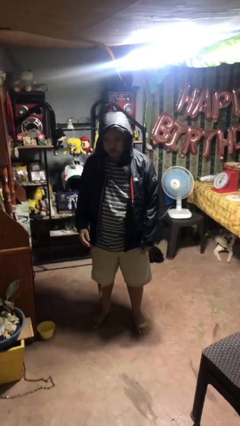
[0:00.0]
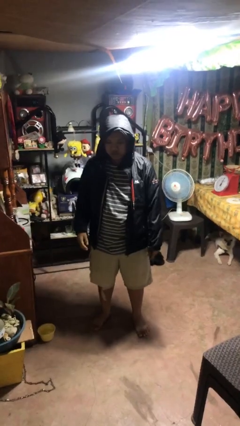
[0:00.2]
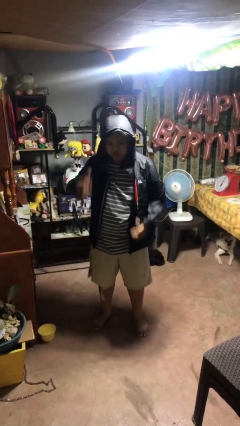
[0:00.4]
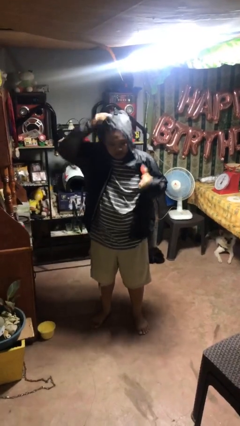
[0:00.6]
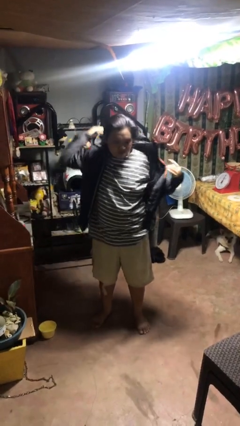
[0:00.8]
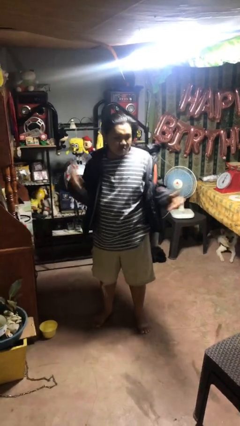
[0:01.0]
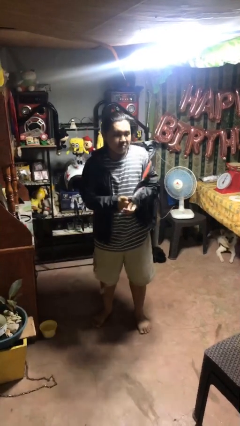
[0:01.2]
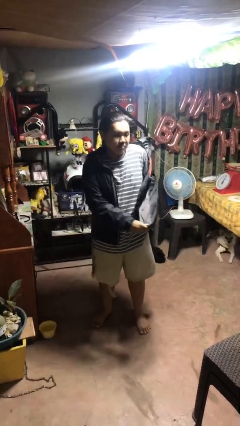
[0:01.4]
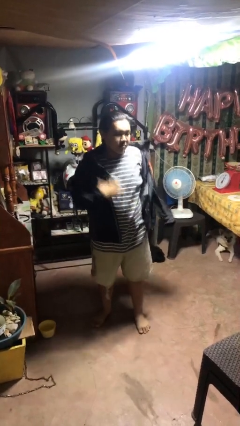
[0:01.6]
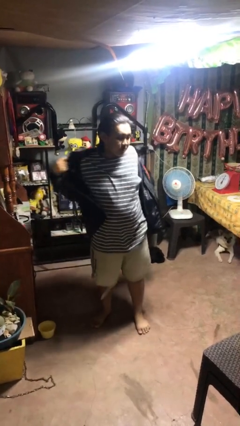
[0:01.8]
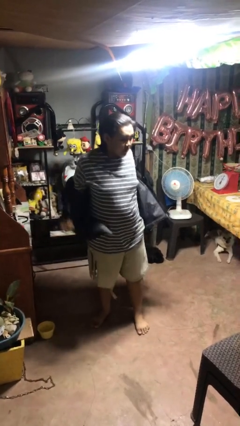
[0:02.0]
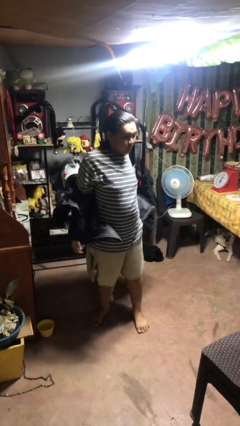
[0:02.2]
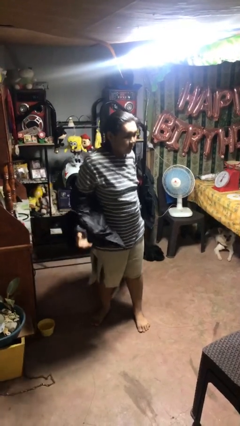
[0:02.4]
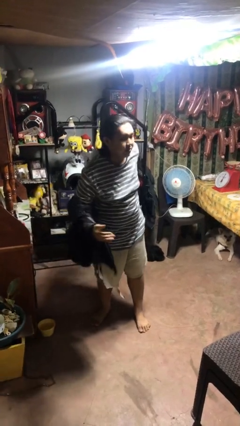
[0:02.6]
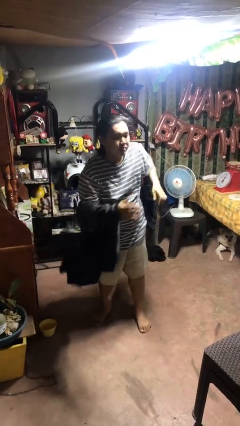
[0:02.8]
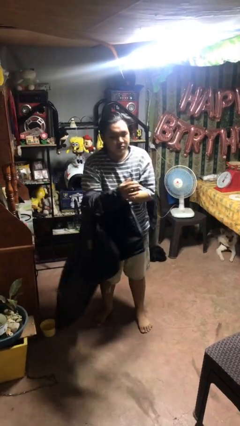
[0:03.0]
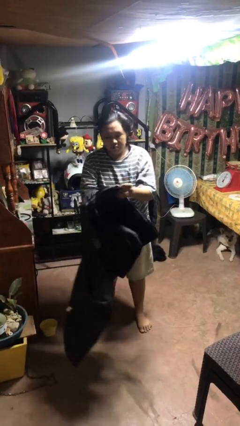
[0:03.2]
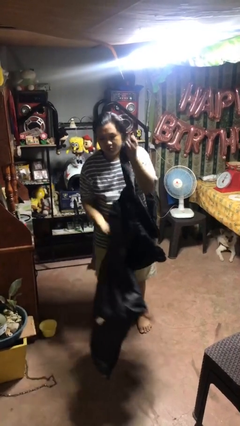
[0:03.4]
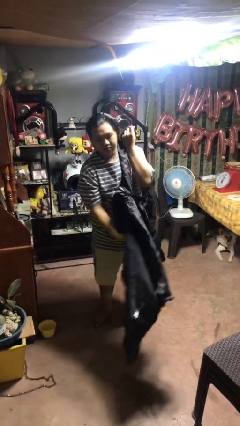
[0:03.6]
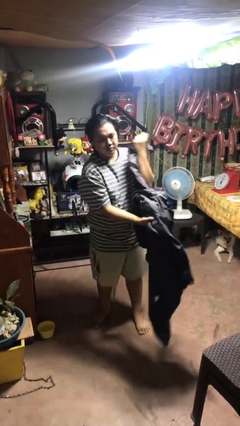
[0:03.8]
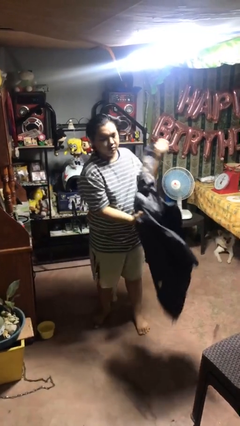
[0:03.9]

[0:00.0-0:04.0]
person takes off hoodie

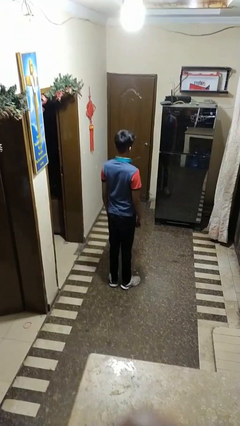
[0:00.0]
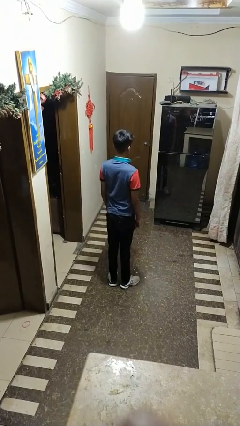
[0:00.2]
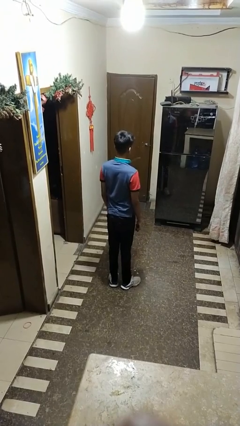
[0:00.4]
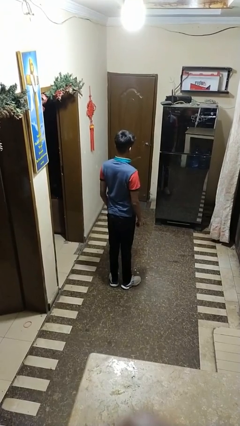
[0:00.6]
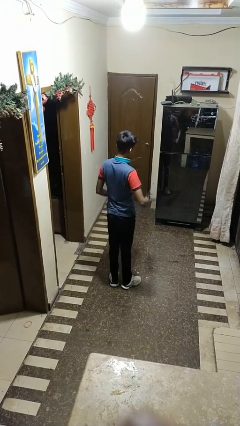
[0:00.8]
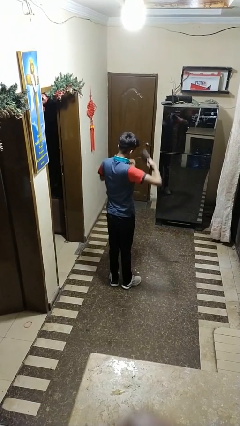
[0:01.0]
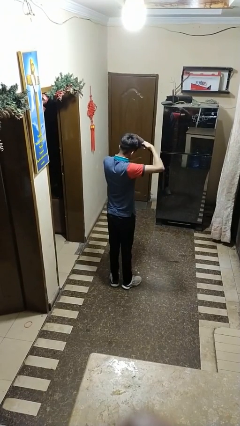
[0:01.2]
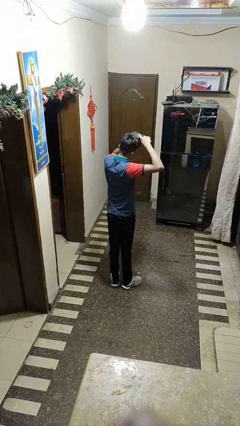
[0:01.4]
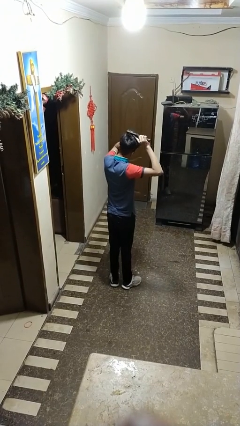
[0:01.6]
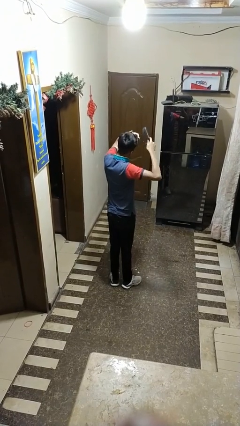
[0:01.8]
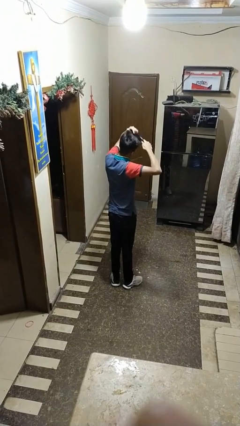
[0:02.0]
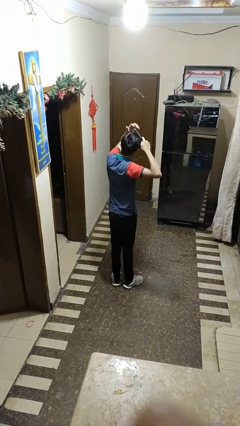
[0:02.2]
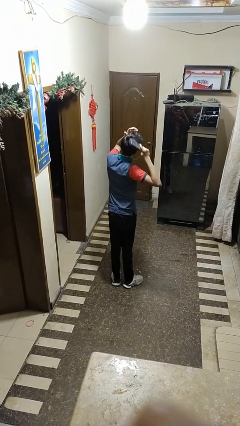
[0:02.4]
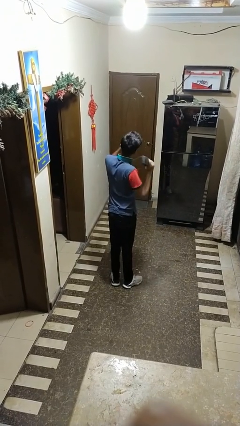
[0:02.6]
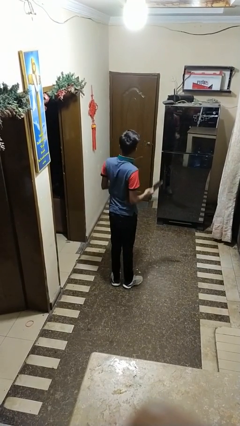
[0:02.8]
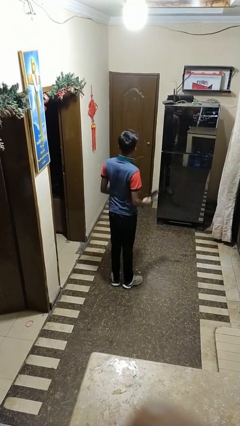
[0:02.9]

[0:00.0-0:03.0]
person brushes hair

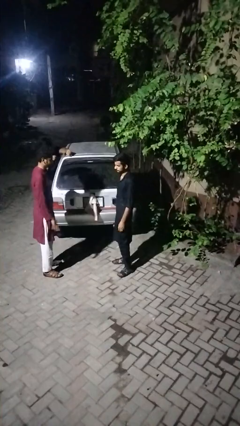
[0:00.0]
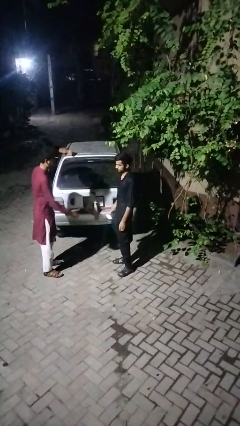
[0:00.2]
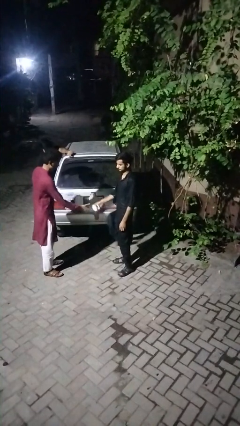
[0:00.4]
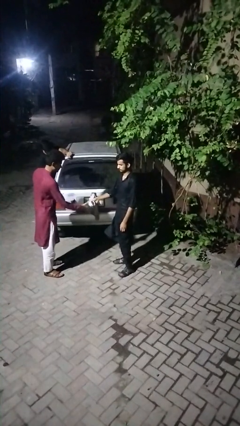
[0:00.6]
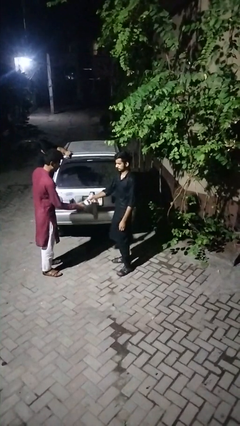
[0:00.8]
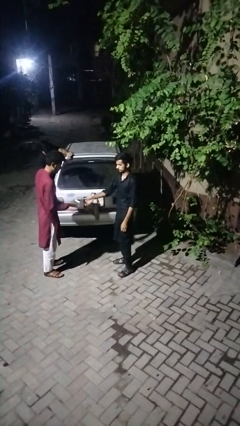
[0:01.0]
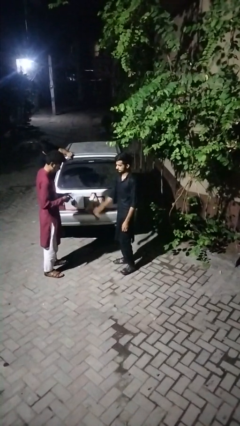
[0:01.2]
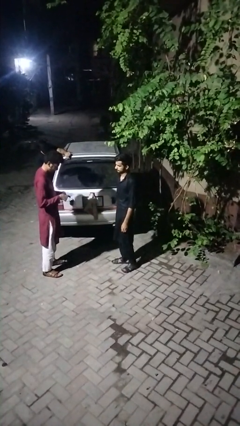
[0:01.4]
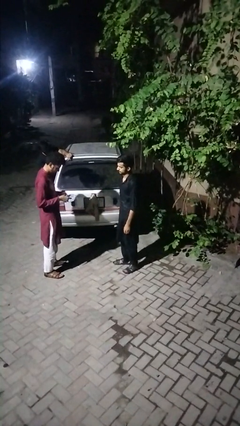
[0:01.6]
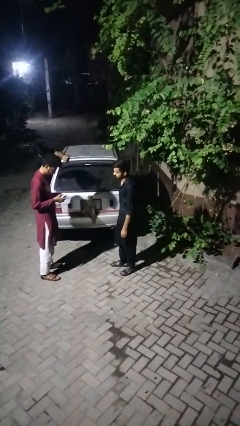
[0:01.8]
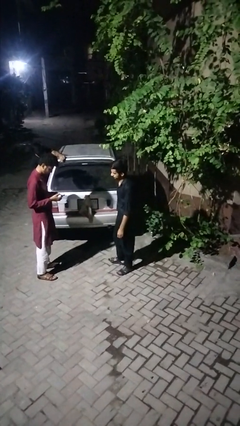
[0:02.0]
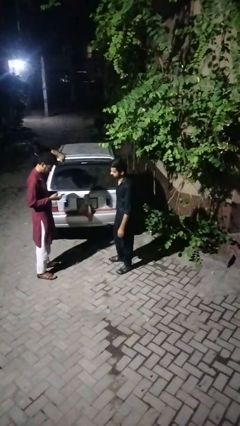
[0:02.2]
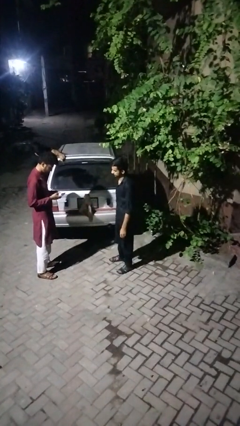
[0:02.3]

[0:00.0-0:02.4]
person transfers object to person

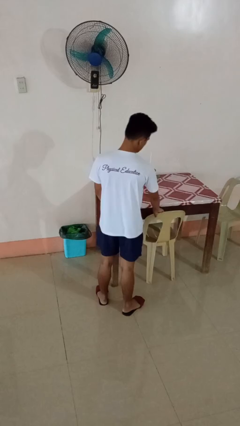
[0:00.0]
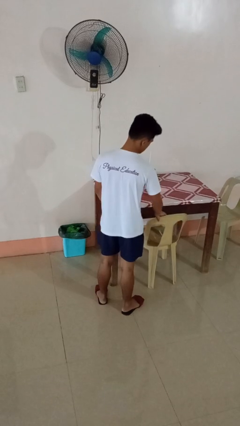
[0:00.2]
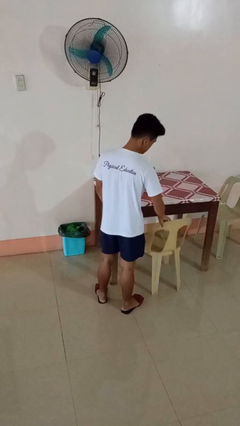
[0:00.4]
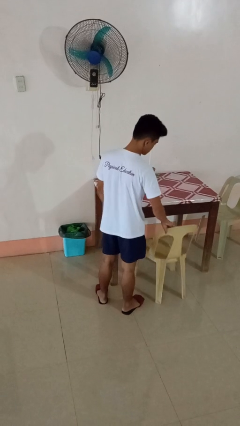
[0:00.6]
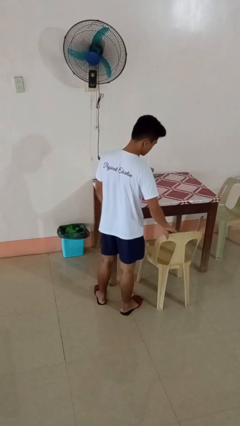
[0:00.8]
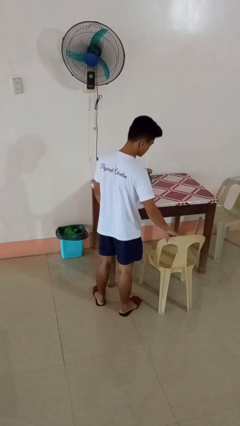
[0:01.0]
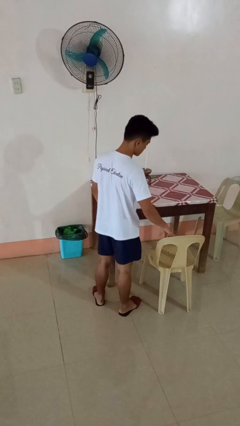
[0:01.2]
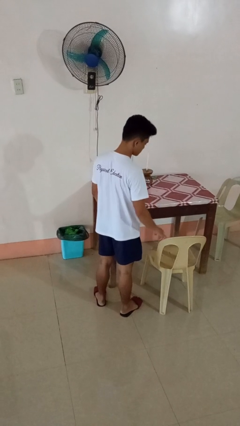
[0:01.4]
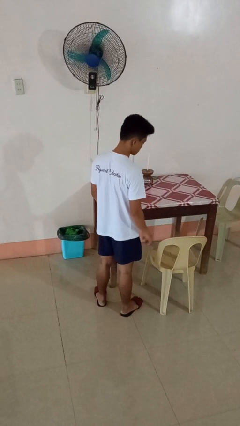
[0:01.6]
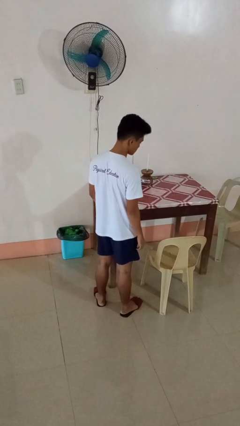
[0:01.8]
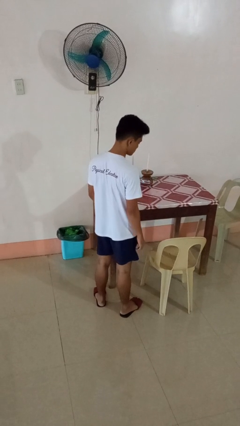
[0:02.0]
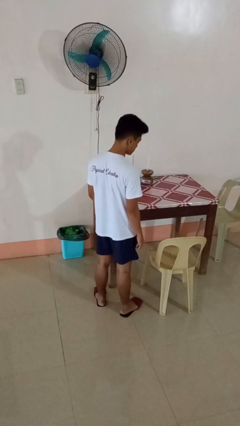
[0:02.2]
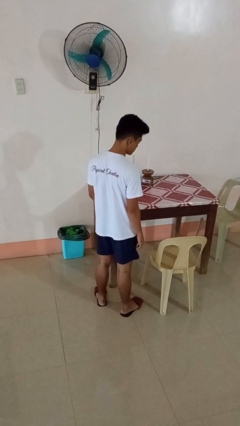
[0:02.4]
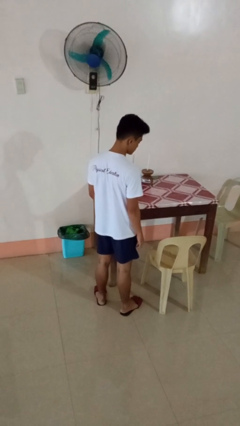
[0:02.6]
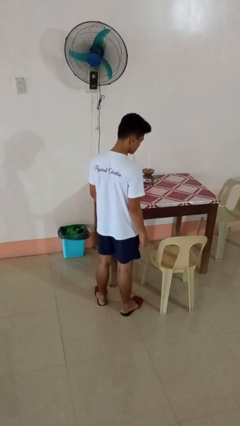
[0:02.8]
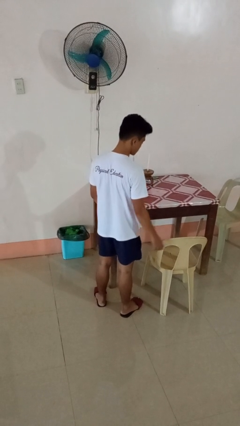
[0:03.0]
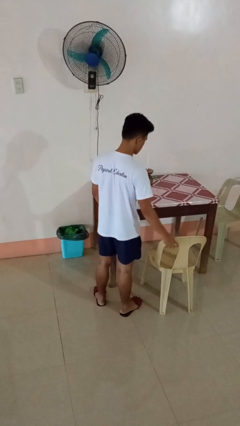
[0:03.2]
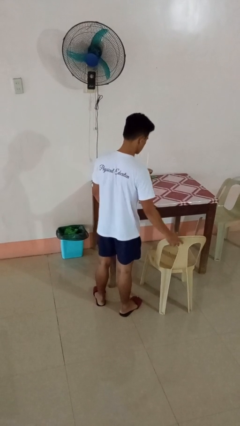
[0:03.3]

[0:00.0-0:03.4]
person pulls out chair

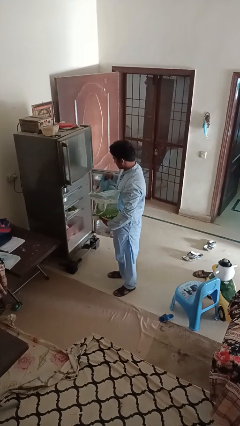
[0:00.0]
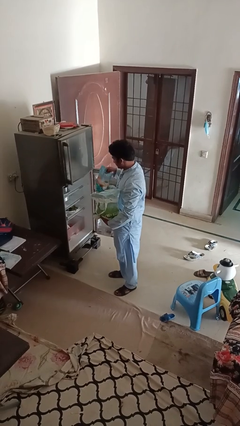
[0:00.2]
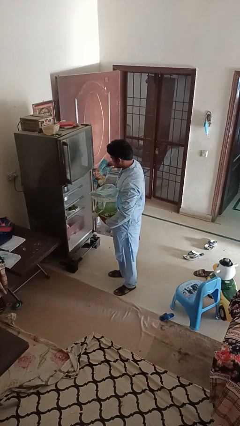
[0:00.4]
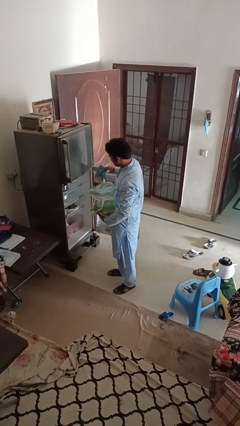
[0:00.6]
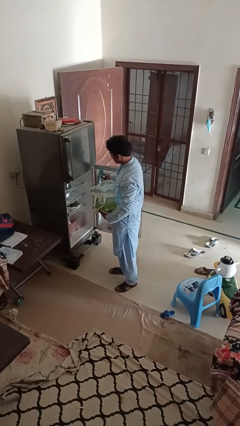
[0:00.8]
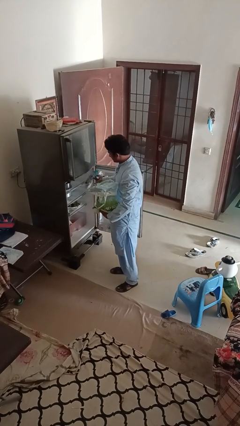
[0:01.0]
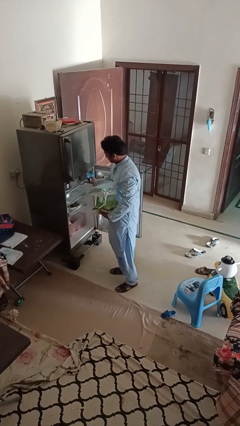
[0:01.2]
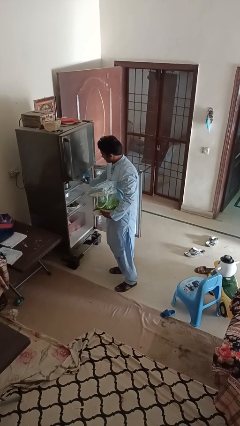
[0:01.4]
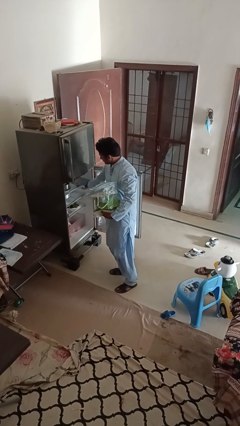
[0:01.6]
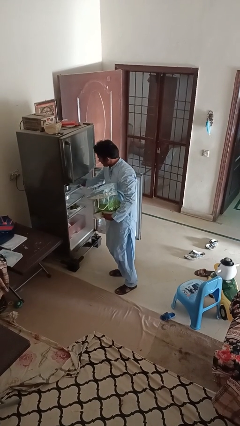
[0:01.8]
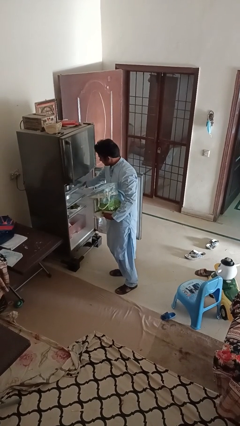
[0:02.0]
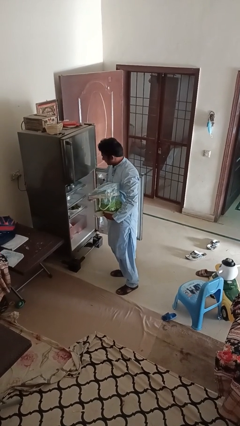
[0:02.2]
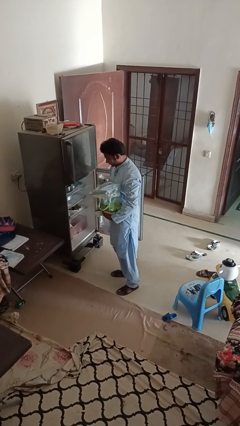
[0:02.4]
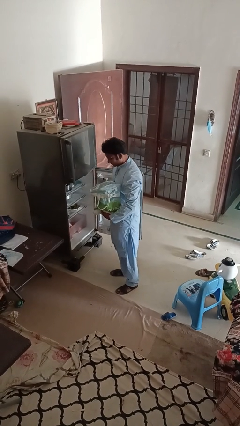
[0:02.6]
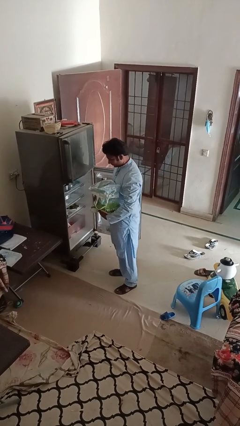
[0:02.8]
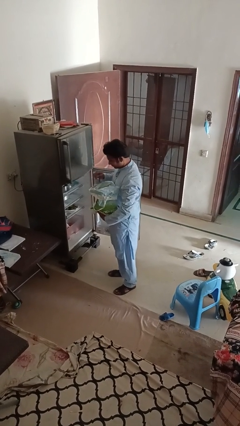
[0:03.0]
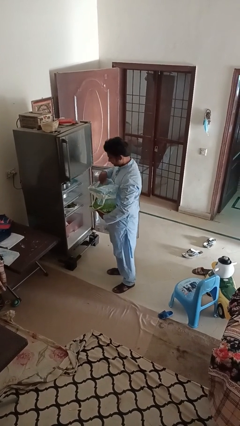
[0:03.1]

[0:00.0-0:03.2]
person loads groceries into refrigerator

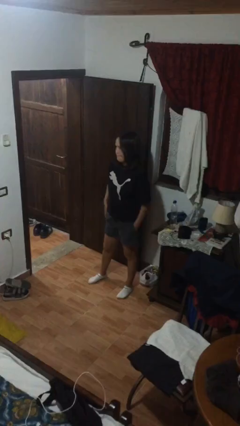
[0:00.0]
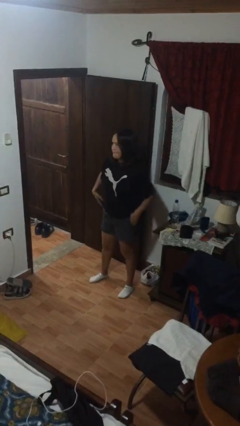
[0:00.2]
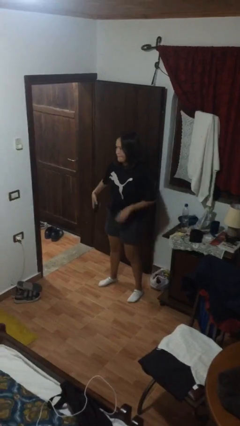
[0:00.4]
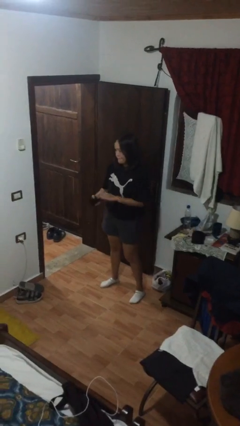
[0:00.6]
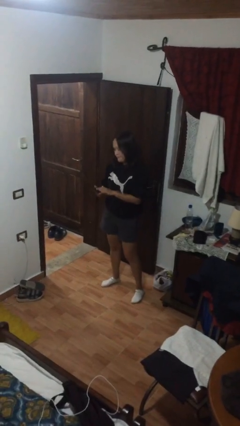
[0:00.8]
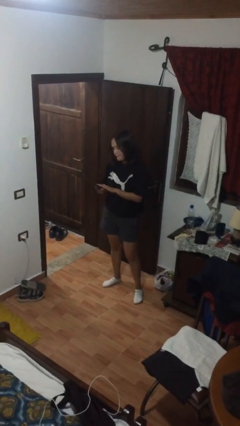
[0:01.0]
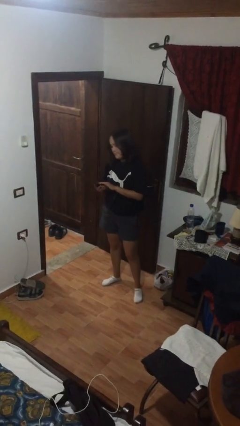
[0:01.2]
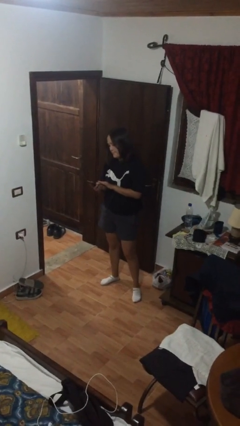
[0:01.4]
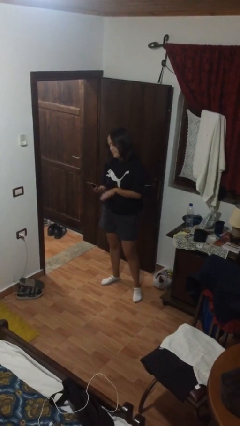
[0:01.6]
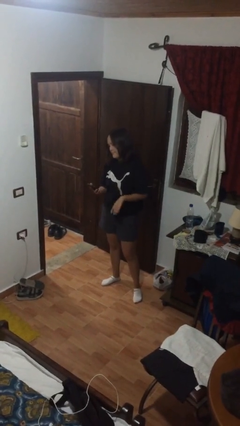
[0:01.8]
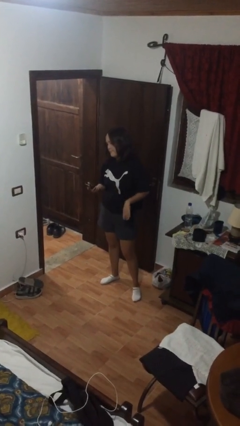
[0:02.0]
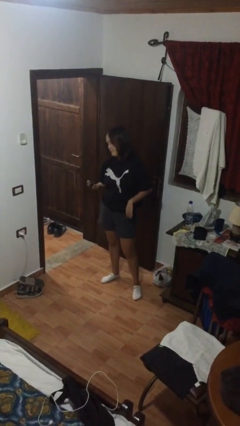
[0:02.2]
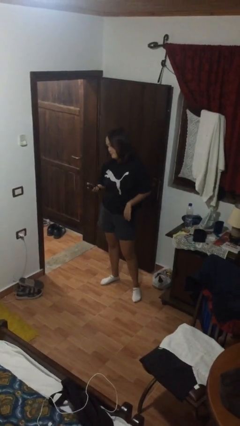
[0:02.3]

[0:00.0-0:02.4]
person takes phone from pocket
